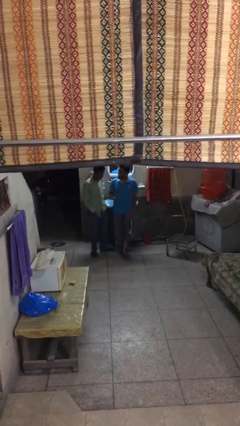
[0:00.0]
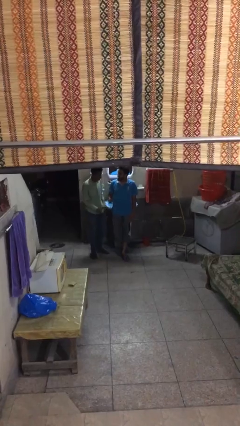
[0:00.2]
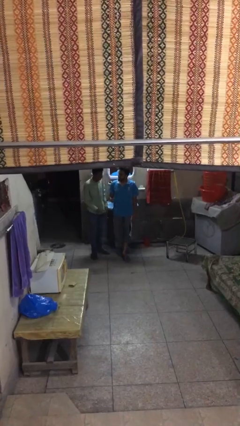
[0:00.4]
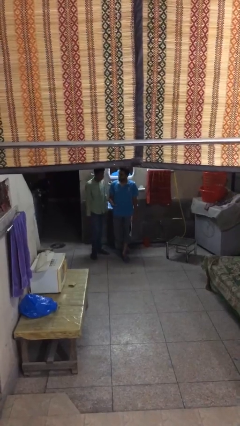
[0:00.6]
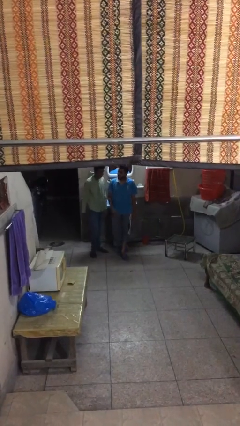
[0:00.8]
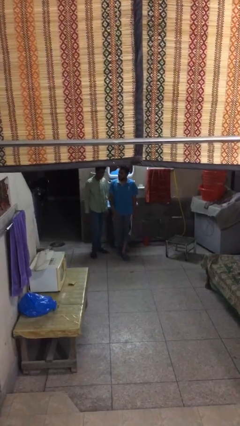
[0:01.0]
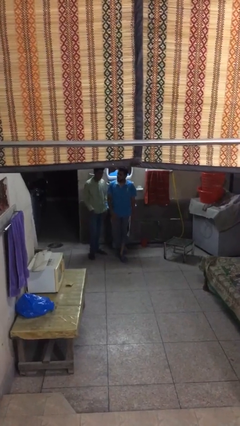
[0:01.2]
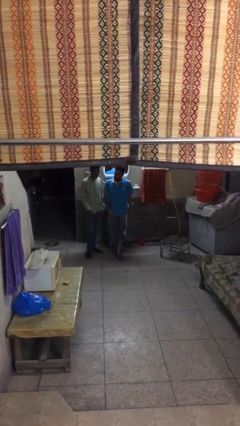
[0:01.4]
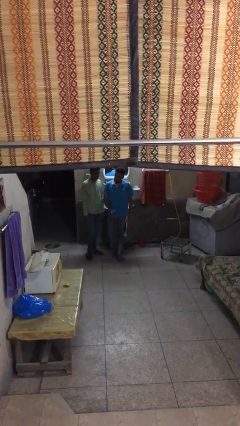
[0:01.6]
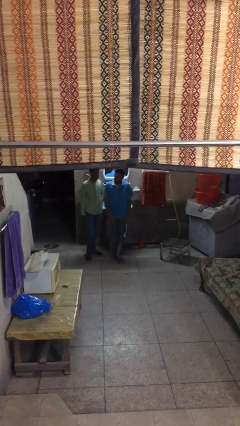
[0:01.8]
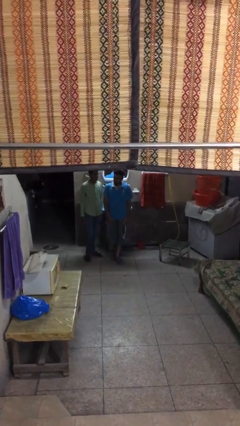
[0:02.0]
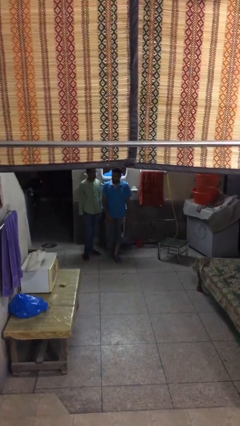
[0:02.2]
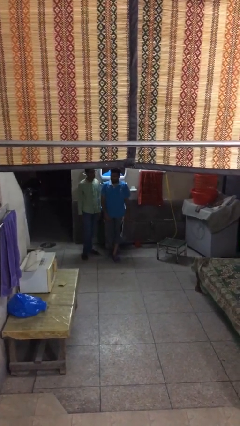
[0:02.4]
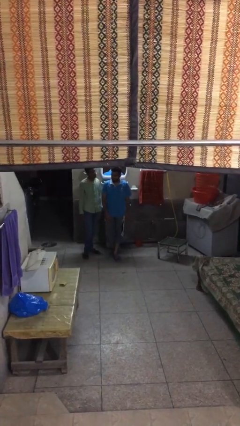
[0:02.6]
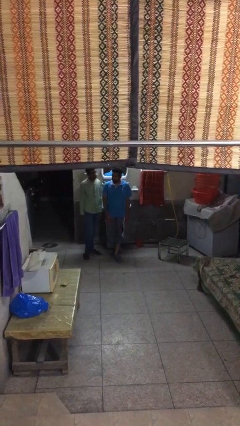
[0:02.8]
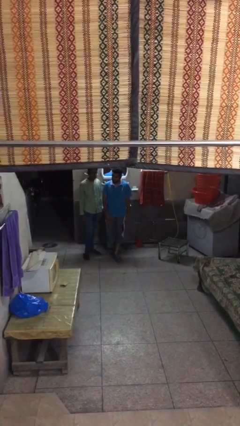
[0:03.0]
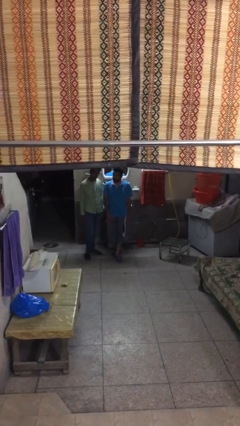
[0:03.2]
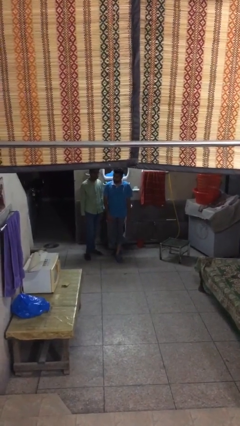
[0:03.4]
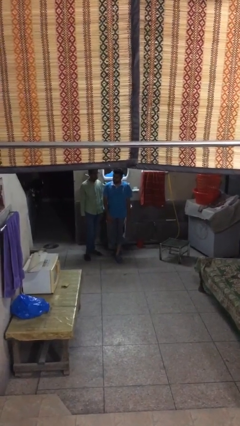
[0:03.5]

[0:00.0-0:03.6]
person talks to person

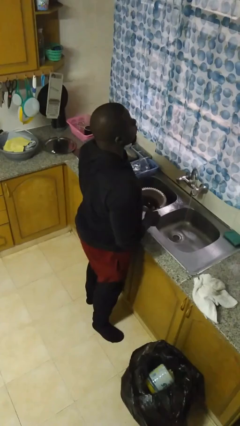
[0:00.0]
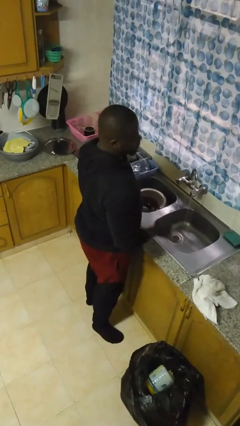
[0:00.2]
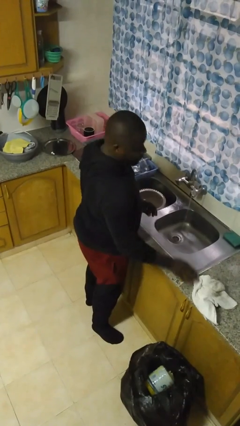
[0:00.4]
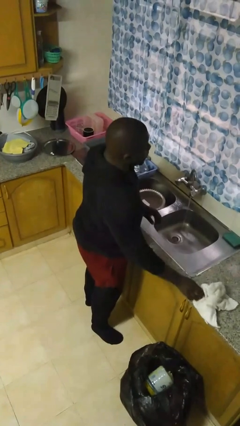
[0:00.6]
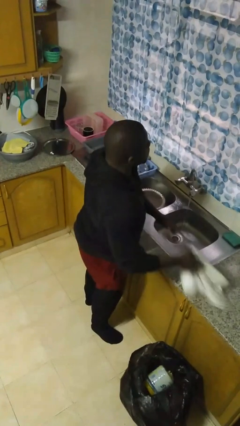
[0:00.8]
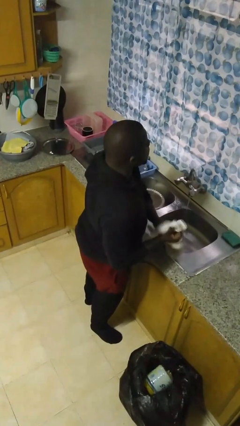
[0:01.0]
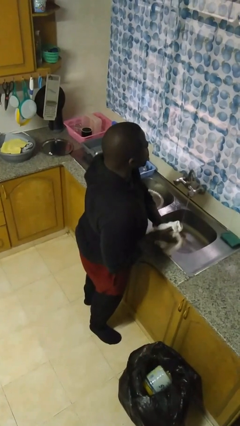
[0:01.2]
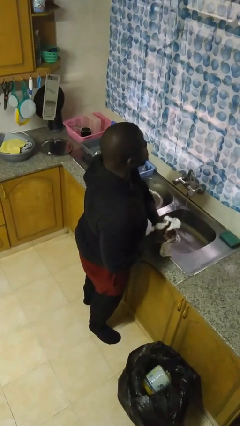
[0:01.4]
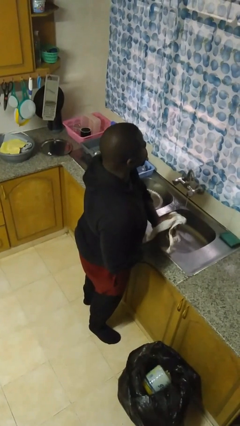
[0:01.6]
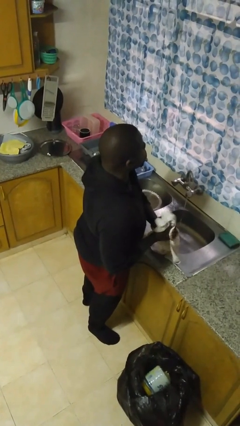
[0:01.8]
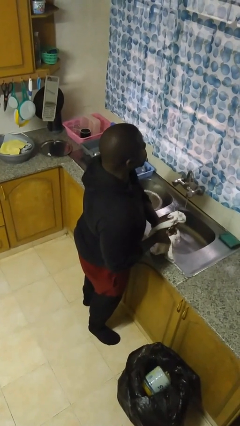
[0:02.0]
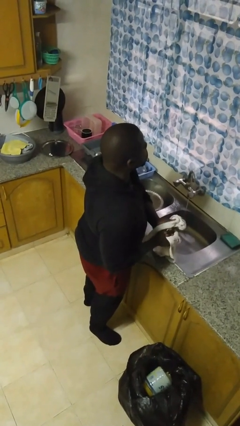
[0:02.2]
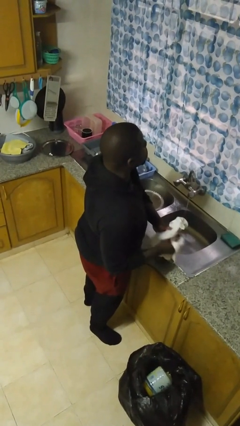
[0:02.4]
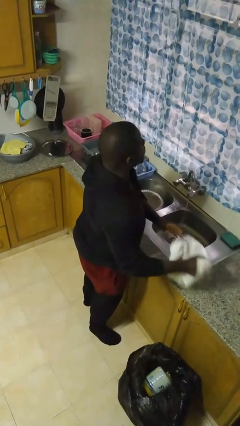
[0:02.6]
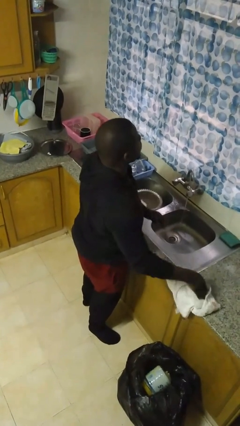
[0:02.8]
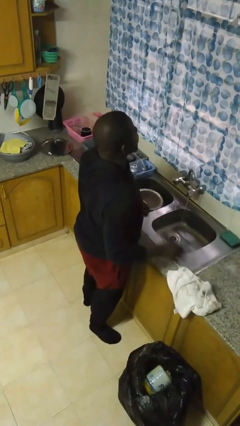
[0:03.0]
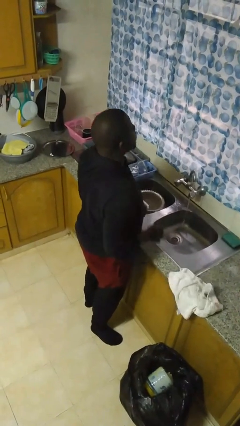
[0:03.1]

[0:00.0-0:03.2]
person dries hands with towel

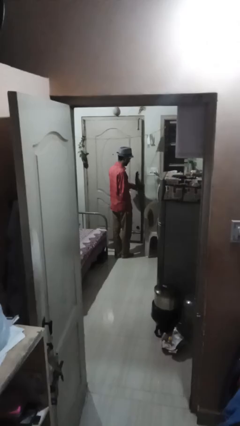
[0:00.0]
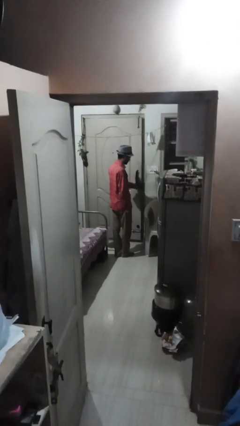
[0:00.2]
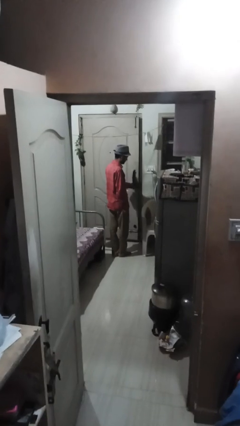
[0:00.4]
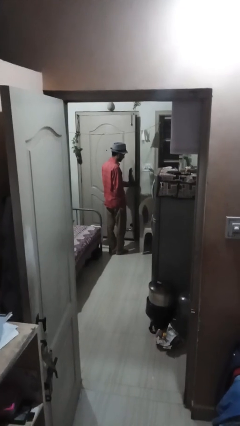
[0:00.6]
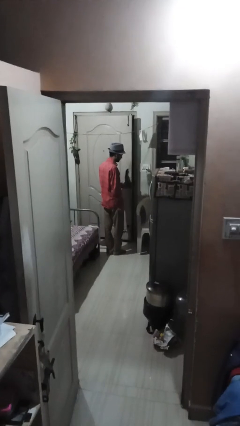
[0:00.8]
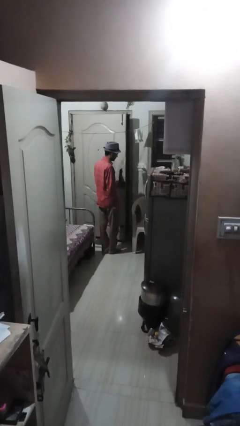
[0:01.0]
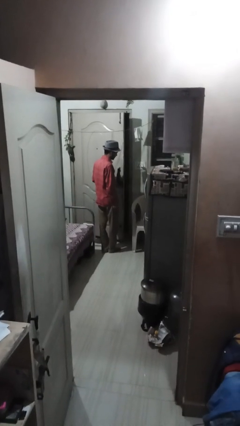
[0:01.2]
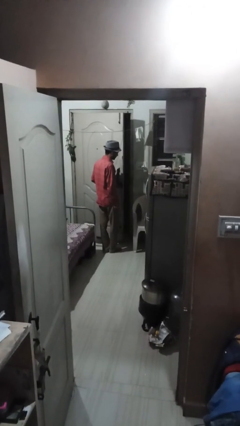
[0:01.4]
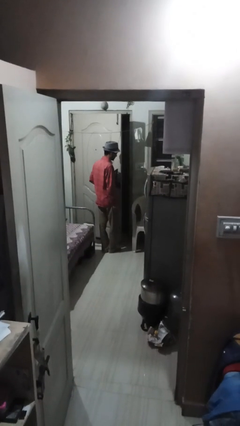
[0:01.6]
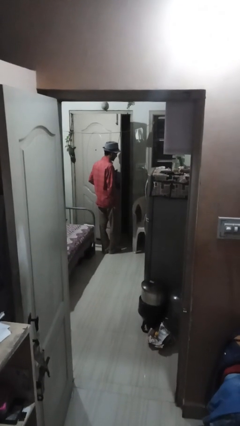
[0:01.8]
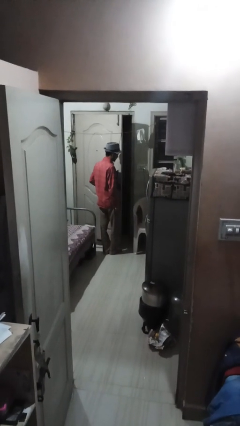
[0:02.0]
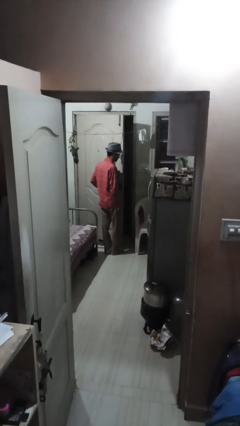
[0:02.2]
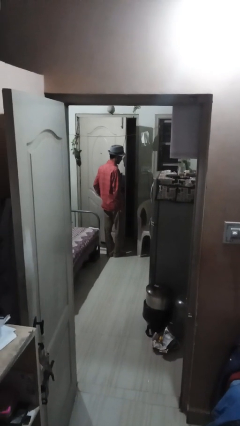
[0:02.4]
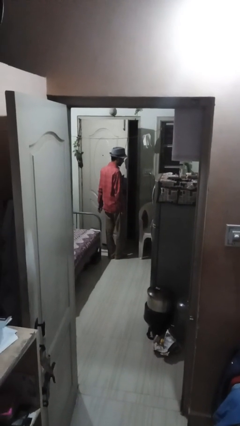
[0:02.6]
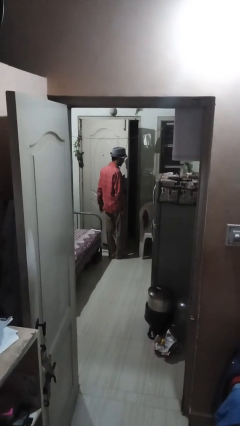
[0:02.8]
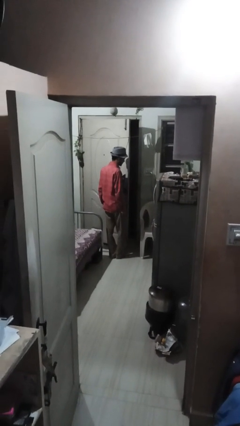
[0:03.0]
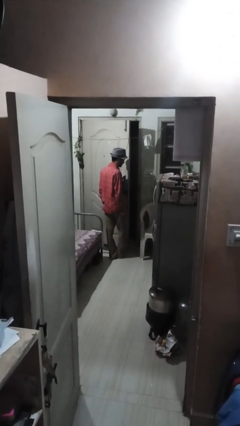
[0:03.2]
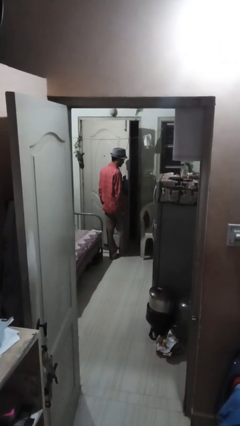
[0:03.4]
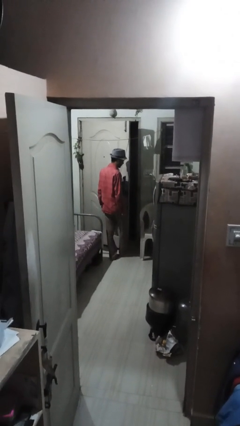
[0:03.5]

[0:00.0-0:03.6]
person opens facility door

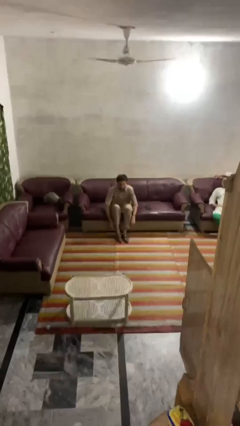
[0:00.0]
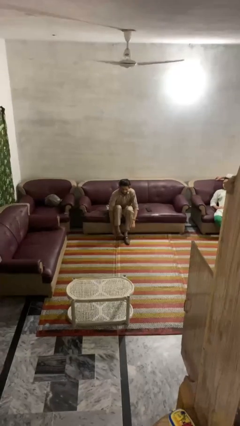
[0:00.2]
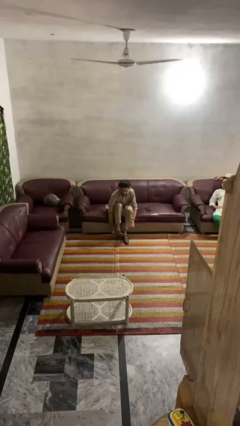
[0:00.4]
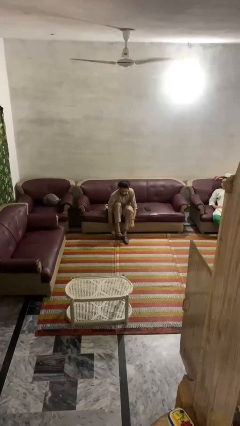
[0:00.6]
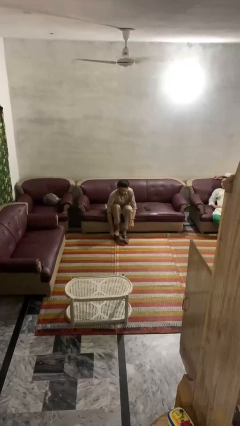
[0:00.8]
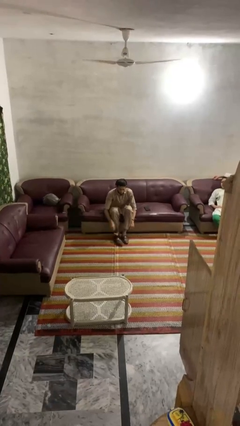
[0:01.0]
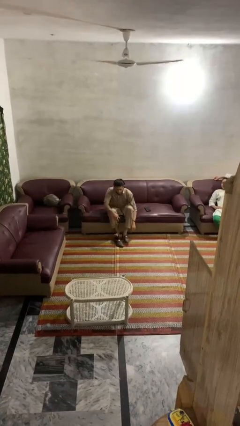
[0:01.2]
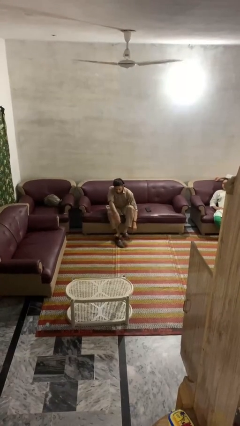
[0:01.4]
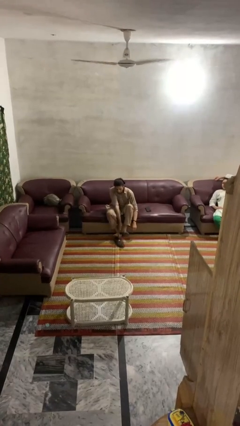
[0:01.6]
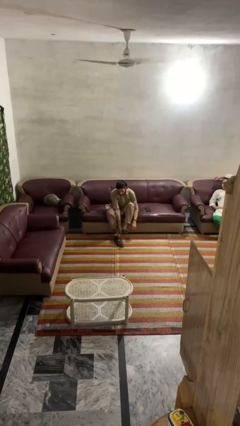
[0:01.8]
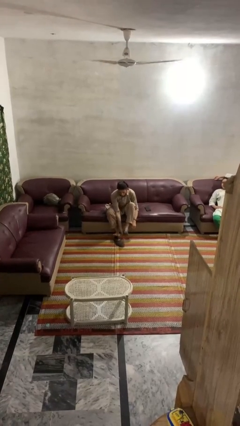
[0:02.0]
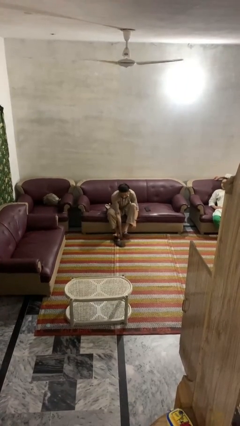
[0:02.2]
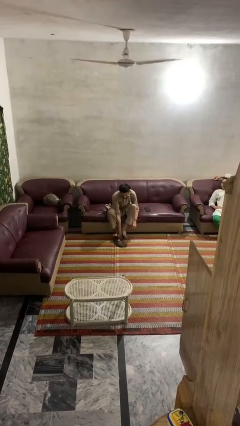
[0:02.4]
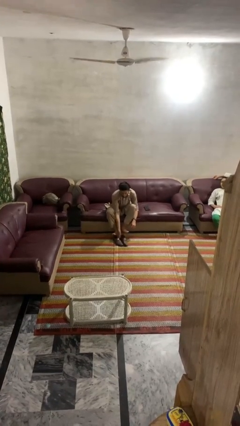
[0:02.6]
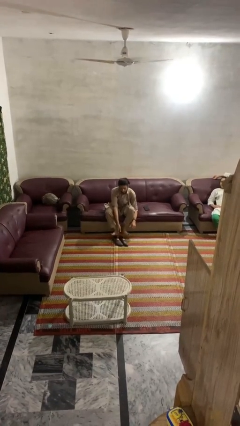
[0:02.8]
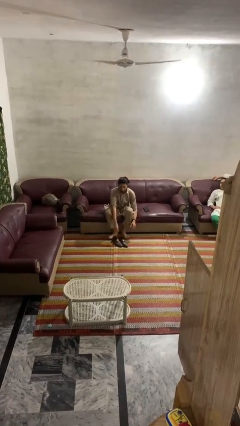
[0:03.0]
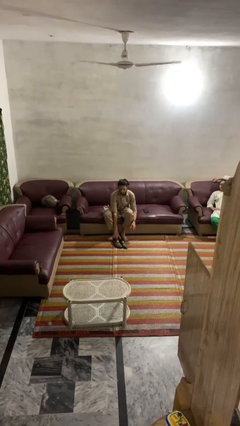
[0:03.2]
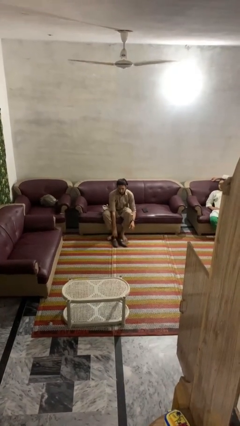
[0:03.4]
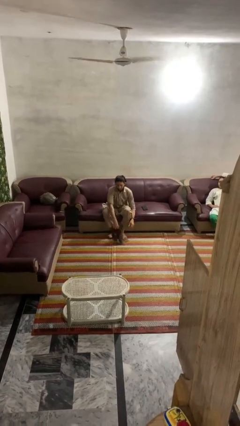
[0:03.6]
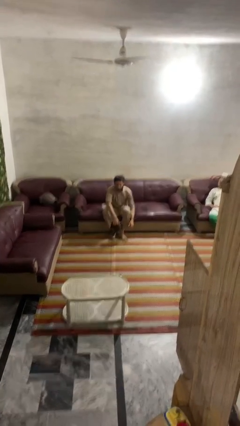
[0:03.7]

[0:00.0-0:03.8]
person takes off shoes

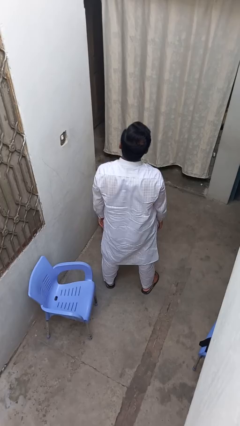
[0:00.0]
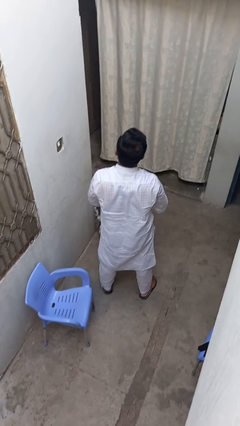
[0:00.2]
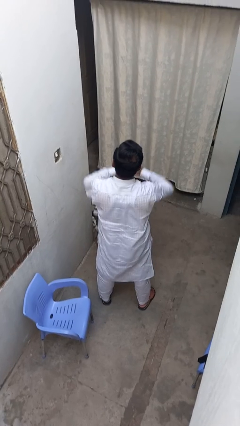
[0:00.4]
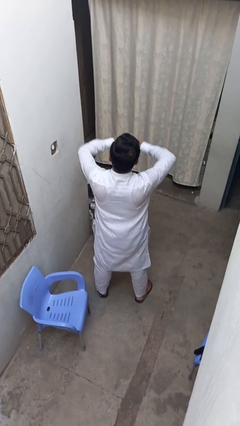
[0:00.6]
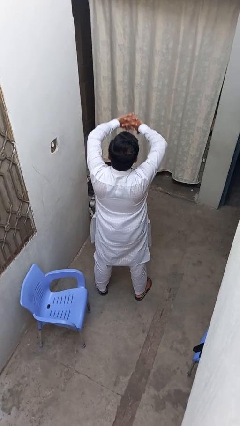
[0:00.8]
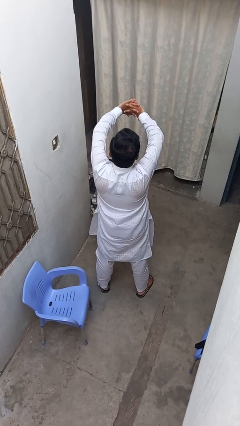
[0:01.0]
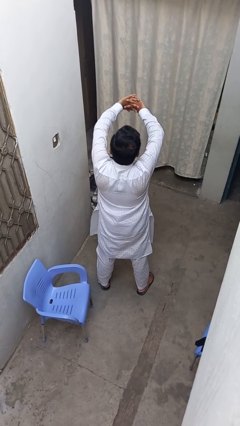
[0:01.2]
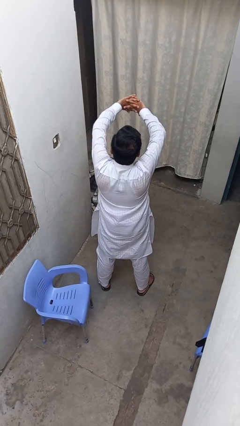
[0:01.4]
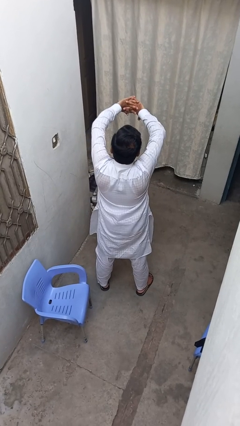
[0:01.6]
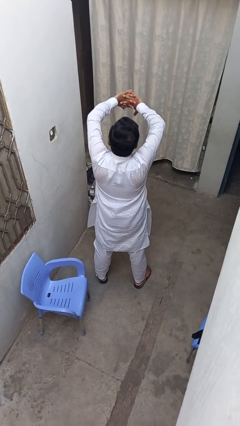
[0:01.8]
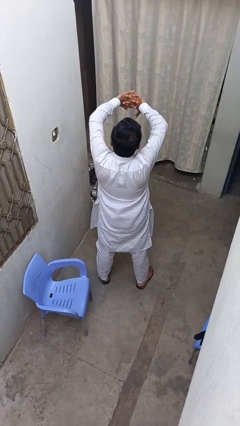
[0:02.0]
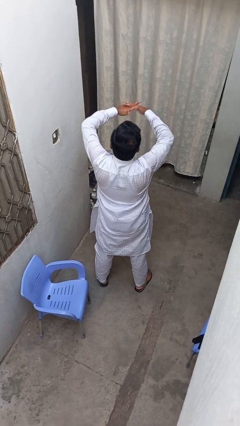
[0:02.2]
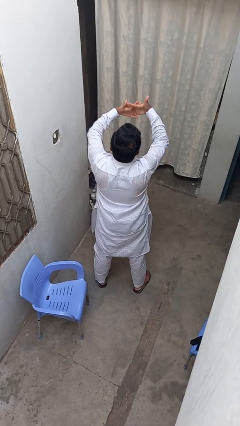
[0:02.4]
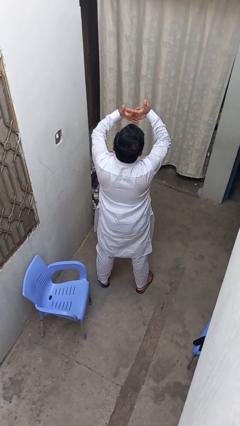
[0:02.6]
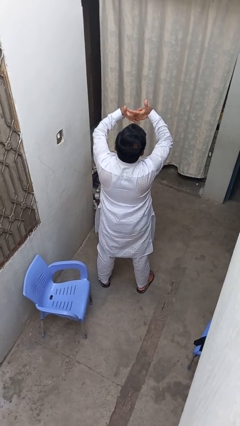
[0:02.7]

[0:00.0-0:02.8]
person snaps fingers
